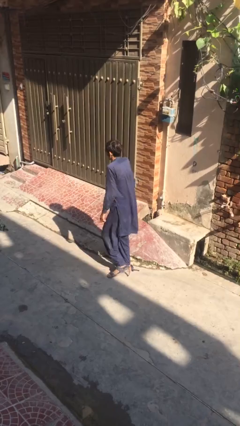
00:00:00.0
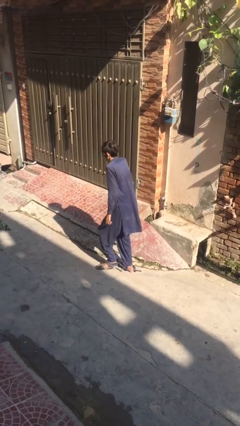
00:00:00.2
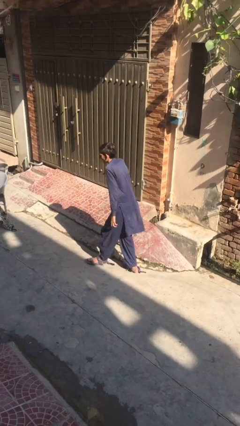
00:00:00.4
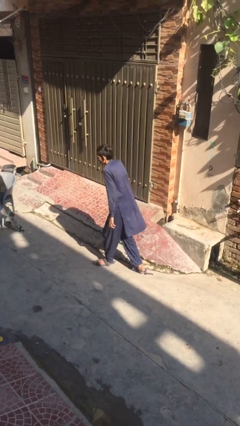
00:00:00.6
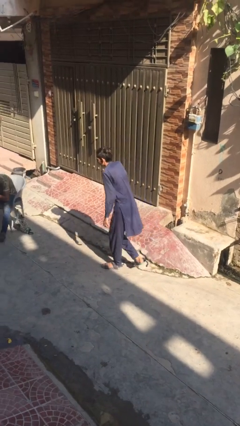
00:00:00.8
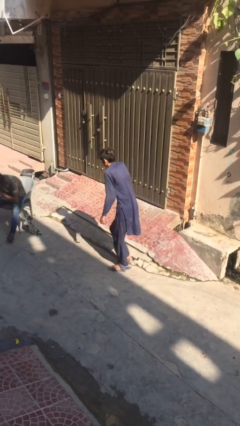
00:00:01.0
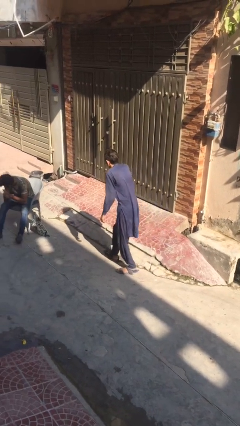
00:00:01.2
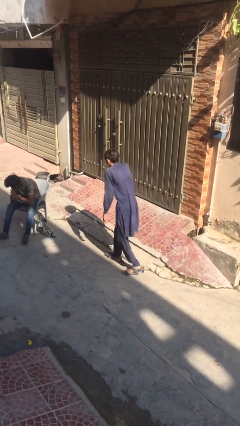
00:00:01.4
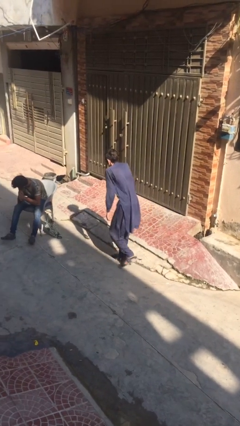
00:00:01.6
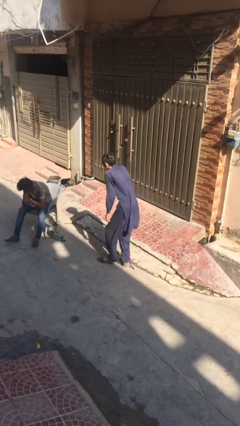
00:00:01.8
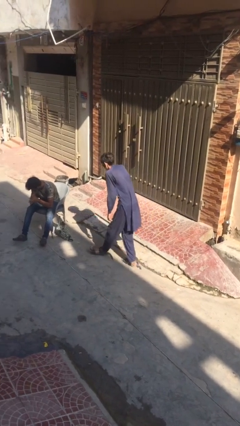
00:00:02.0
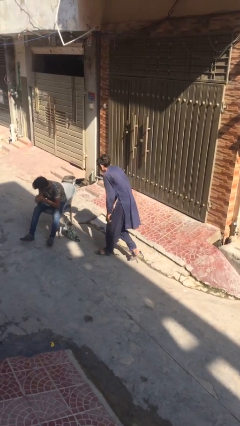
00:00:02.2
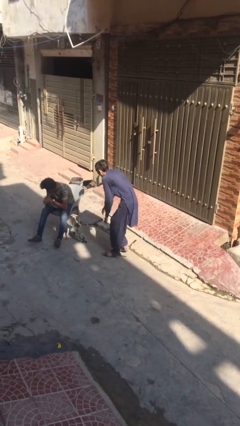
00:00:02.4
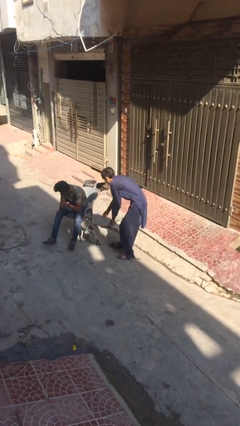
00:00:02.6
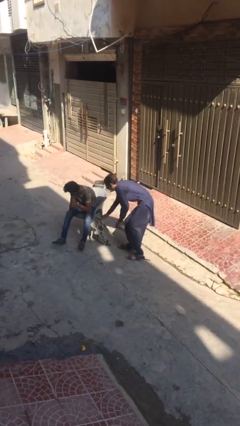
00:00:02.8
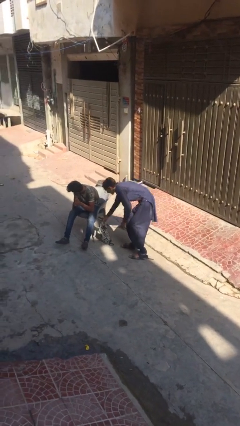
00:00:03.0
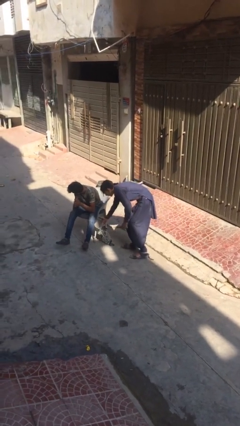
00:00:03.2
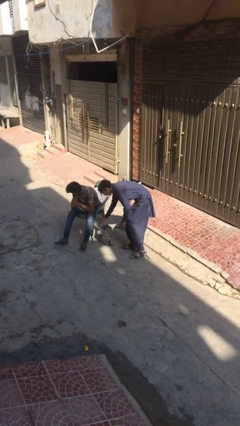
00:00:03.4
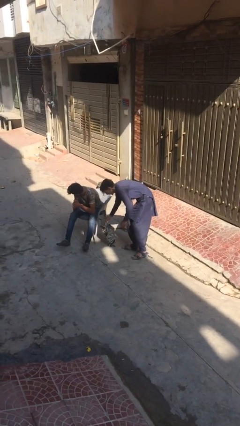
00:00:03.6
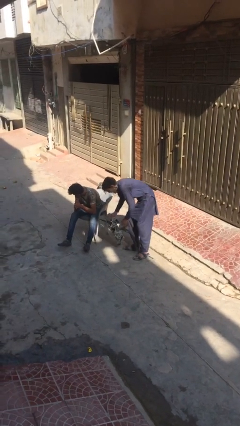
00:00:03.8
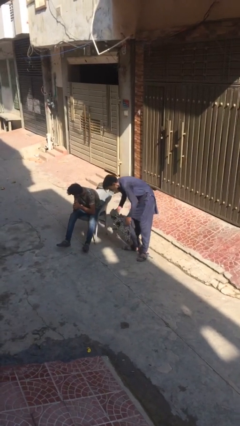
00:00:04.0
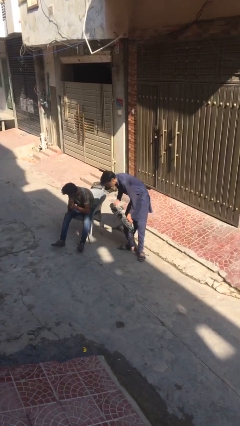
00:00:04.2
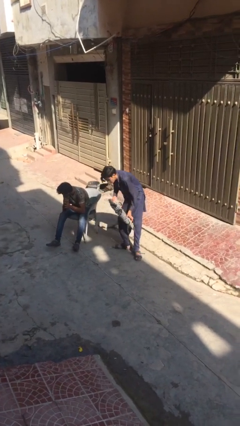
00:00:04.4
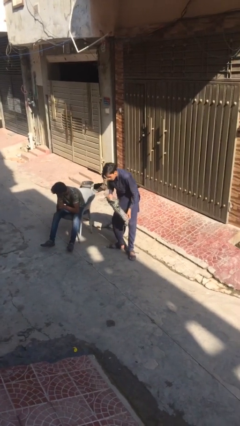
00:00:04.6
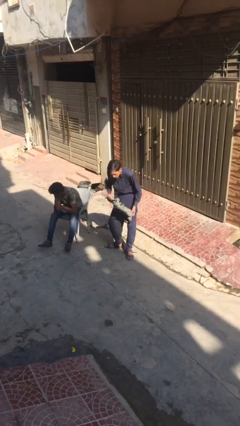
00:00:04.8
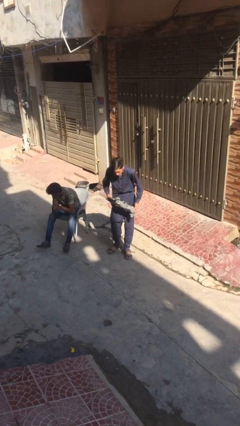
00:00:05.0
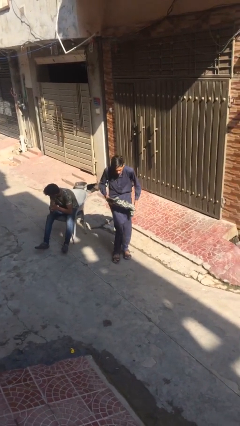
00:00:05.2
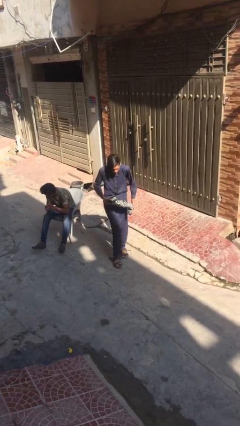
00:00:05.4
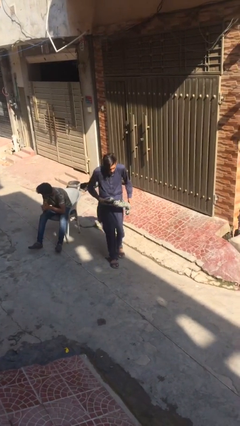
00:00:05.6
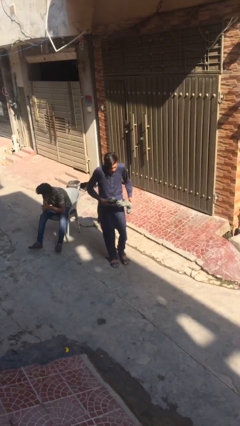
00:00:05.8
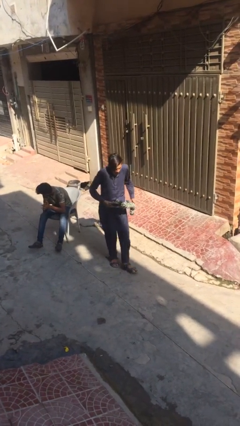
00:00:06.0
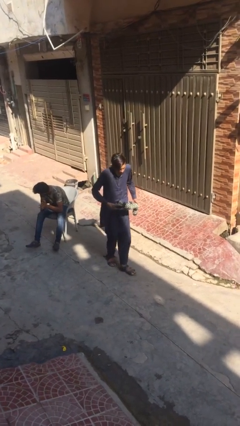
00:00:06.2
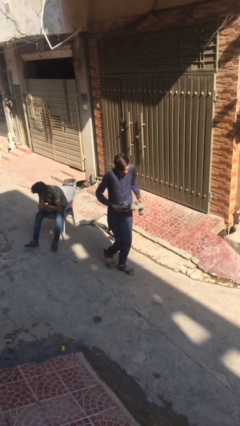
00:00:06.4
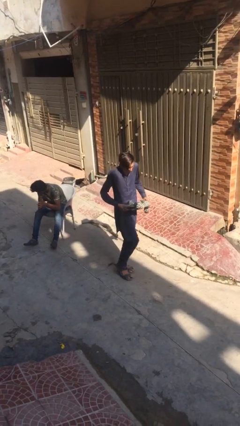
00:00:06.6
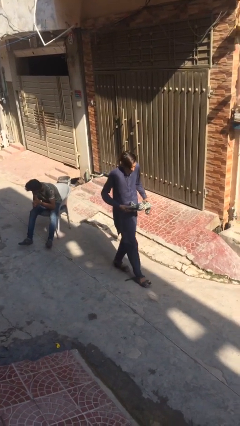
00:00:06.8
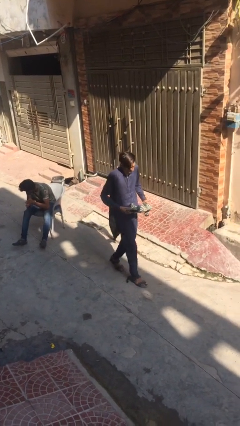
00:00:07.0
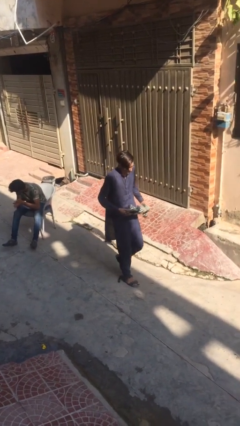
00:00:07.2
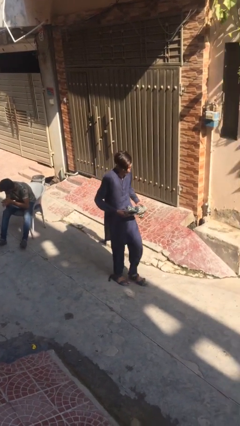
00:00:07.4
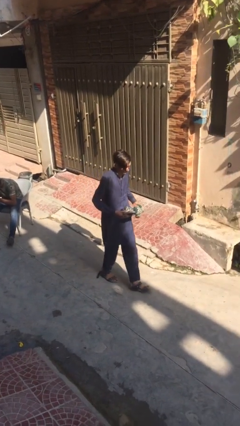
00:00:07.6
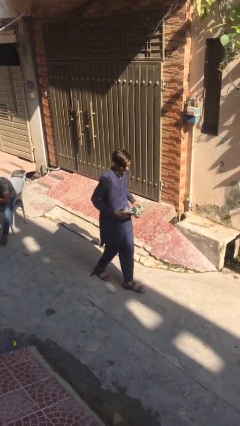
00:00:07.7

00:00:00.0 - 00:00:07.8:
person steals object from person

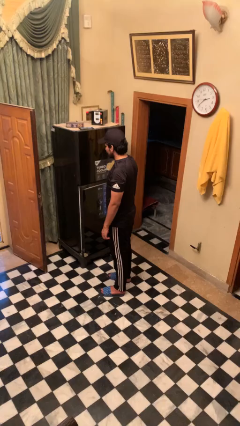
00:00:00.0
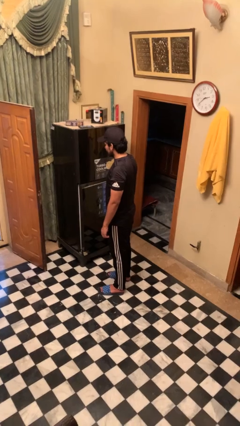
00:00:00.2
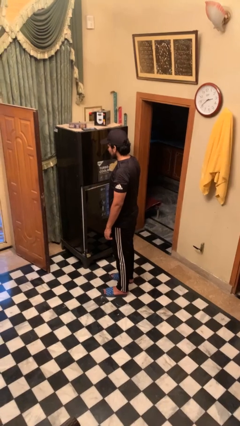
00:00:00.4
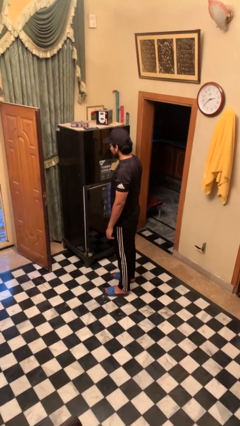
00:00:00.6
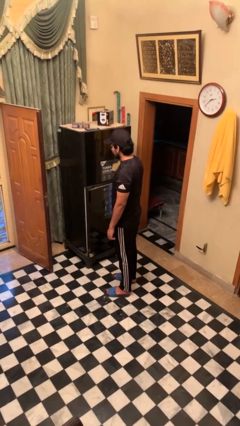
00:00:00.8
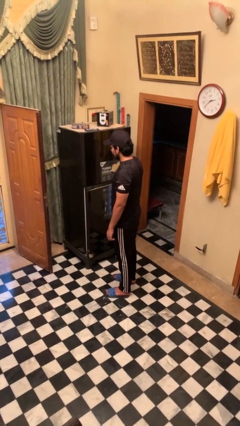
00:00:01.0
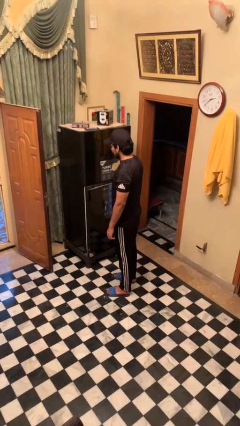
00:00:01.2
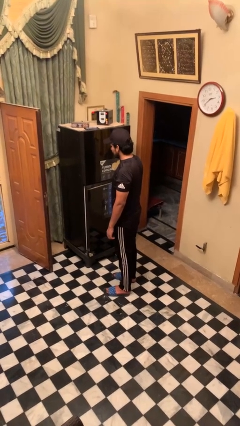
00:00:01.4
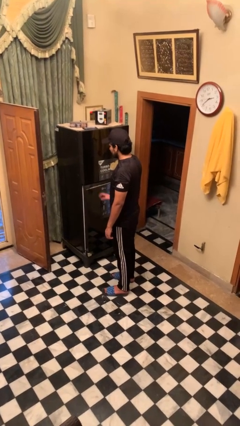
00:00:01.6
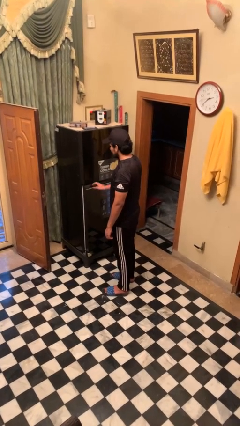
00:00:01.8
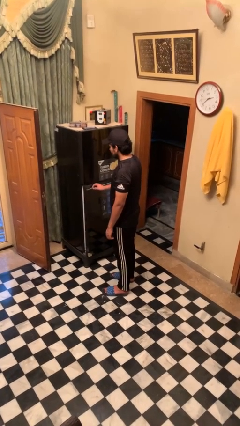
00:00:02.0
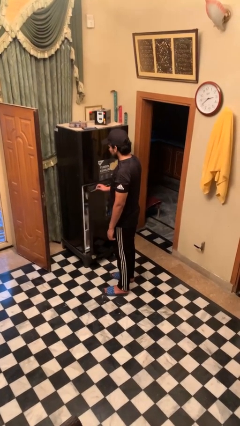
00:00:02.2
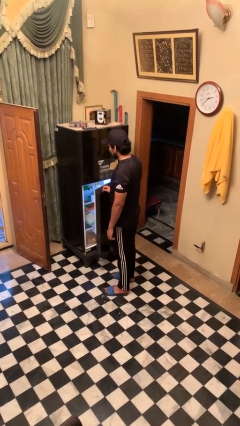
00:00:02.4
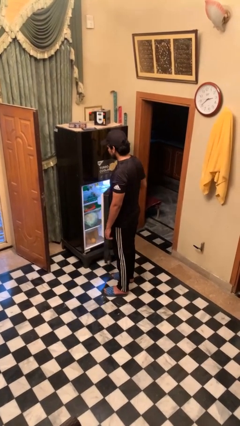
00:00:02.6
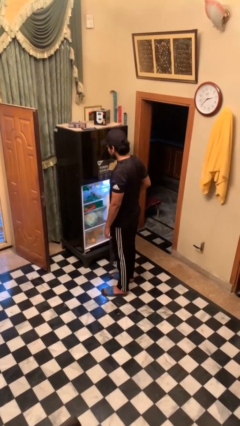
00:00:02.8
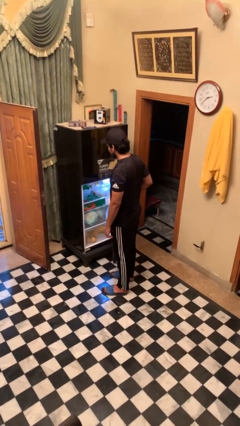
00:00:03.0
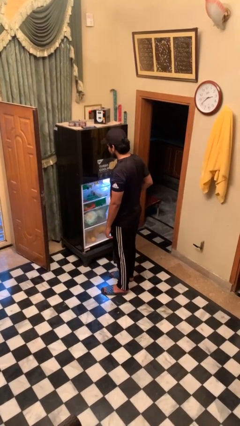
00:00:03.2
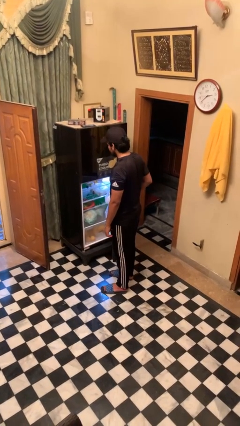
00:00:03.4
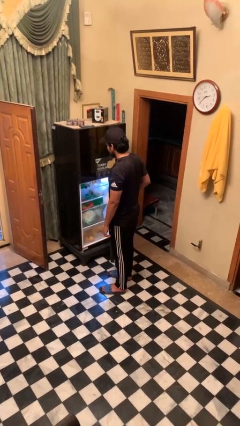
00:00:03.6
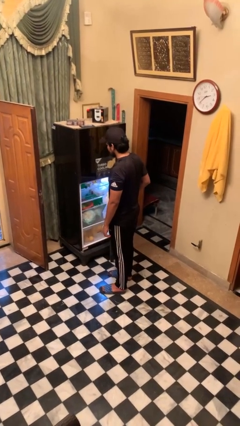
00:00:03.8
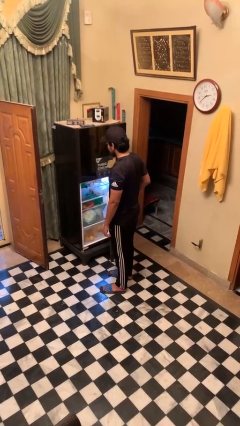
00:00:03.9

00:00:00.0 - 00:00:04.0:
person opens refrigerator

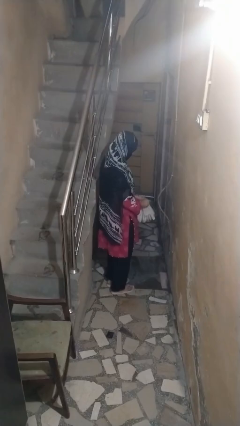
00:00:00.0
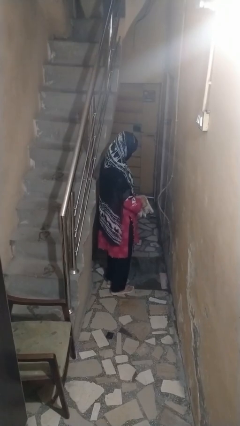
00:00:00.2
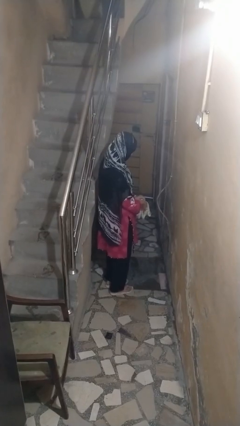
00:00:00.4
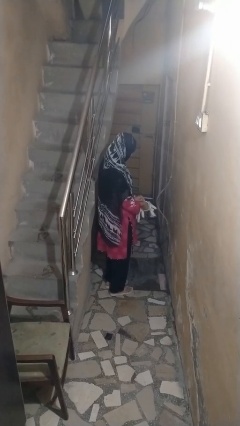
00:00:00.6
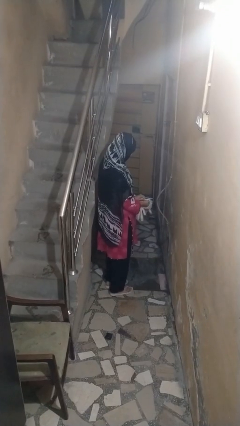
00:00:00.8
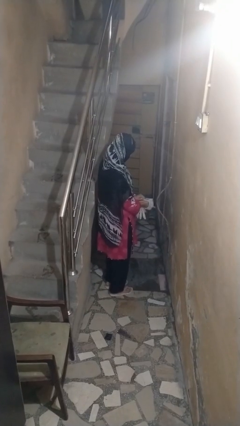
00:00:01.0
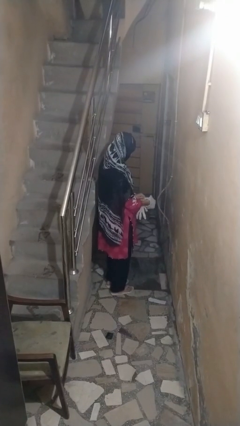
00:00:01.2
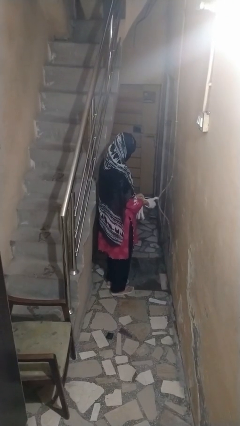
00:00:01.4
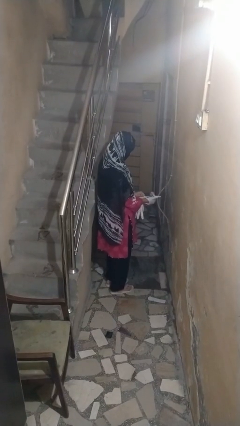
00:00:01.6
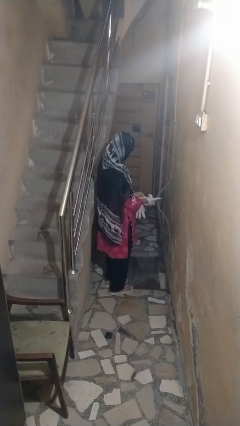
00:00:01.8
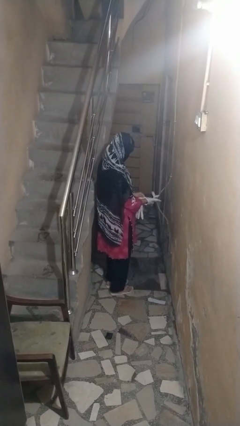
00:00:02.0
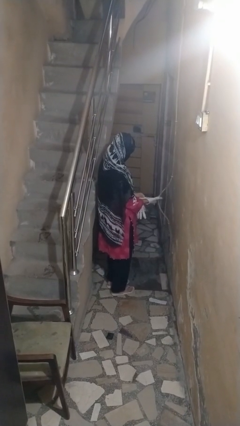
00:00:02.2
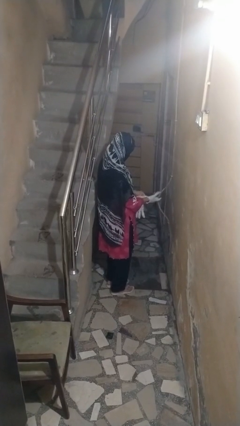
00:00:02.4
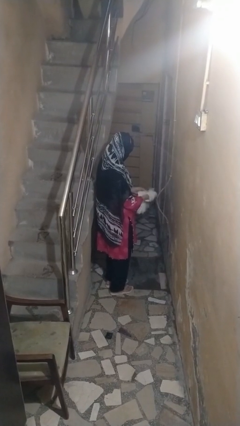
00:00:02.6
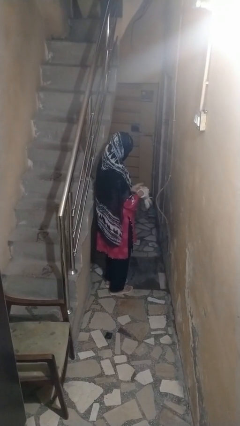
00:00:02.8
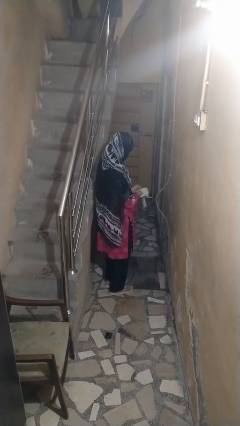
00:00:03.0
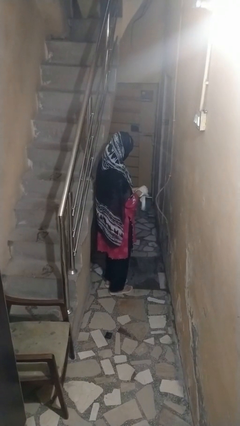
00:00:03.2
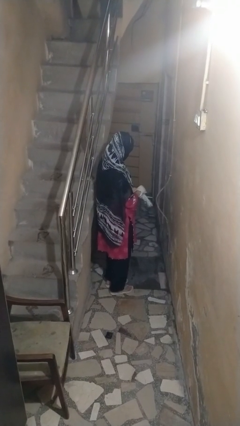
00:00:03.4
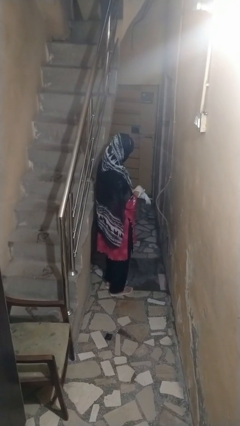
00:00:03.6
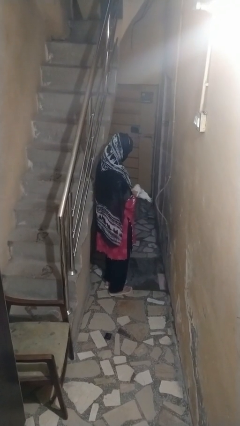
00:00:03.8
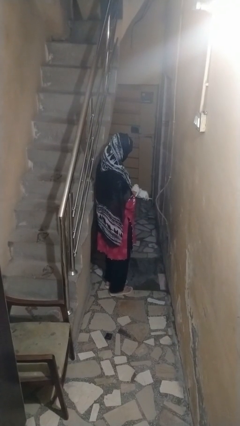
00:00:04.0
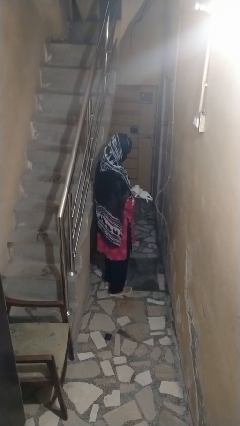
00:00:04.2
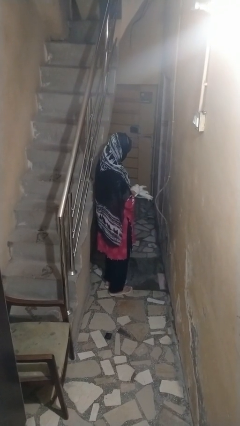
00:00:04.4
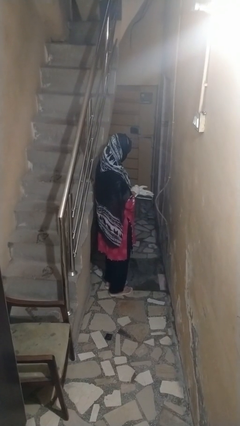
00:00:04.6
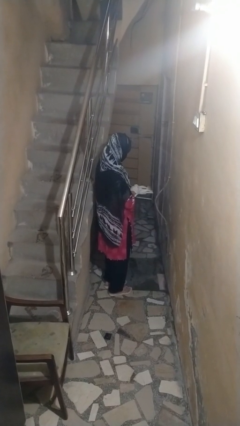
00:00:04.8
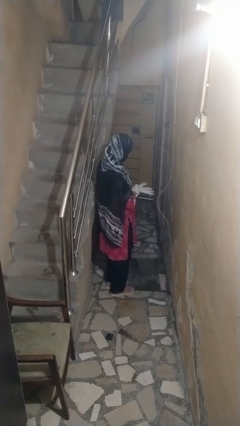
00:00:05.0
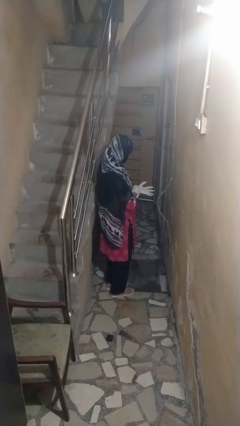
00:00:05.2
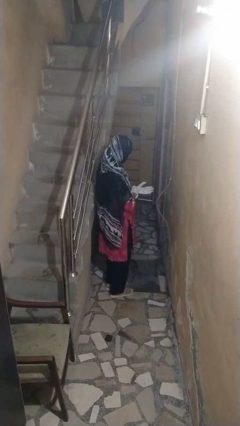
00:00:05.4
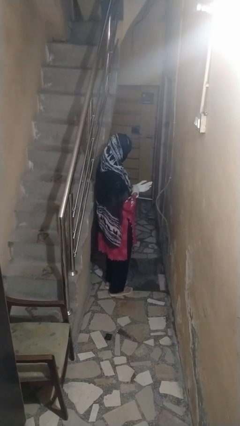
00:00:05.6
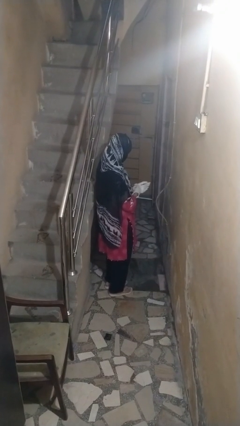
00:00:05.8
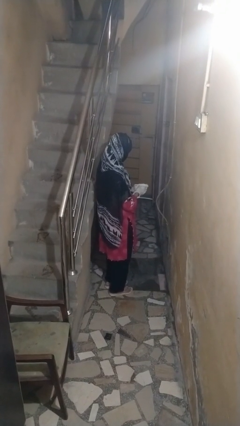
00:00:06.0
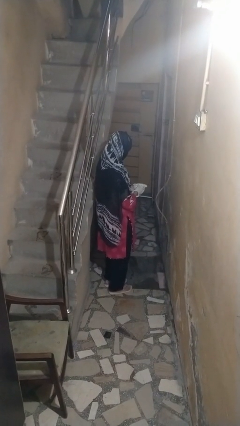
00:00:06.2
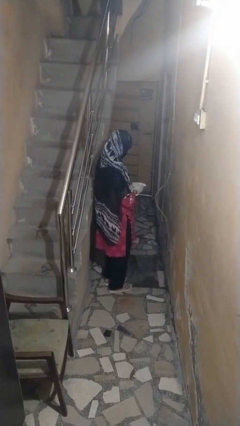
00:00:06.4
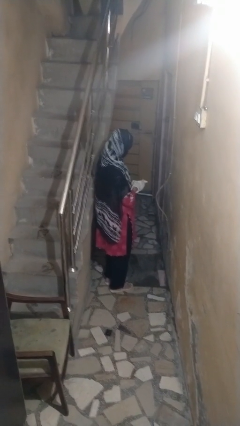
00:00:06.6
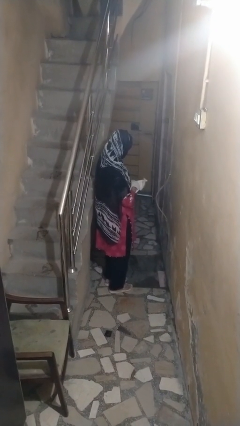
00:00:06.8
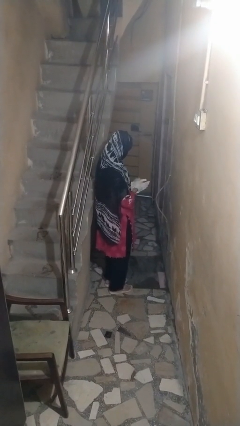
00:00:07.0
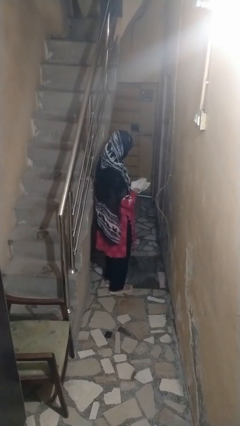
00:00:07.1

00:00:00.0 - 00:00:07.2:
person puts on gloves
